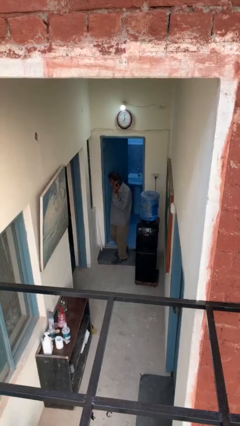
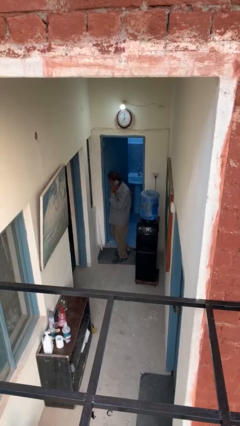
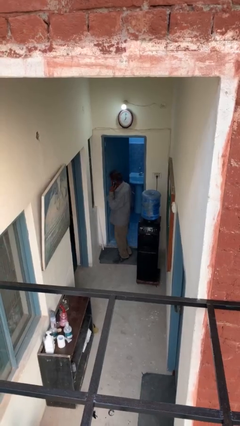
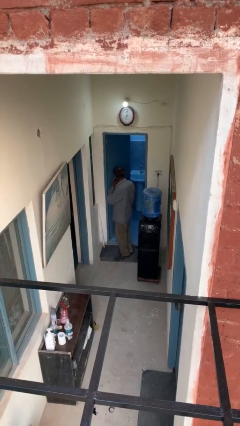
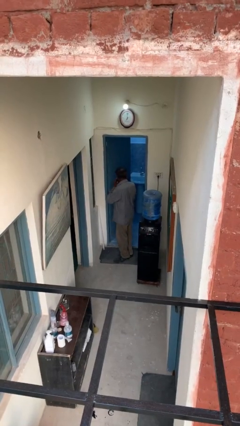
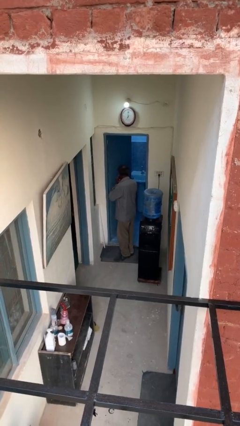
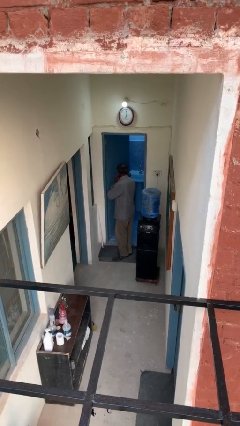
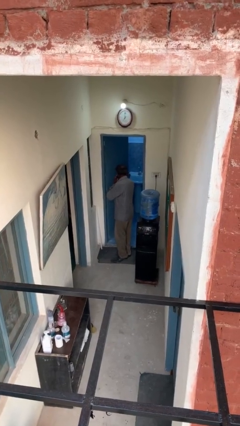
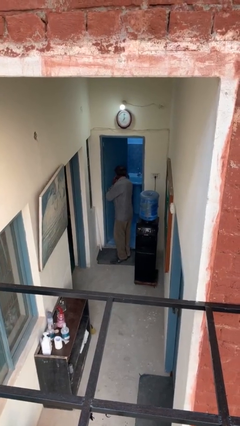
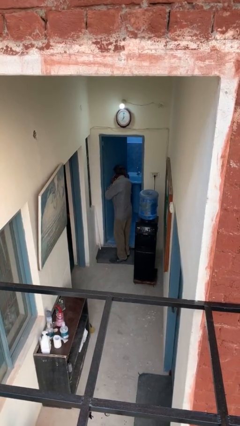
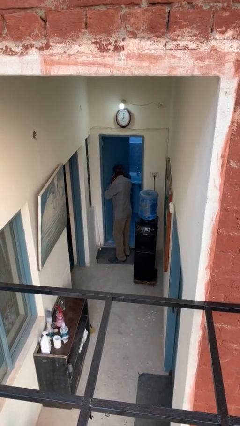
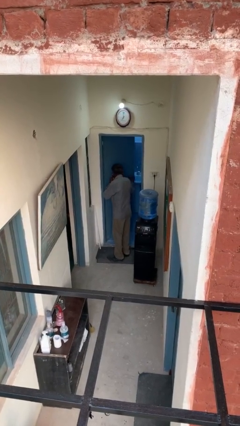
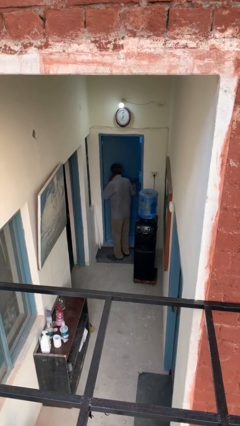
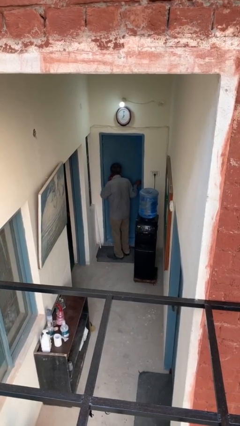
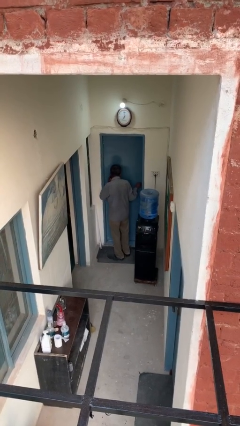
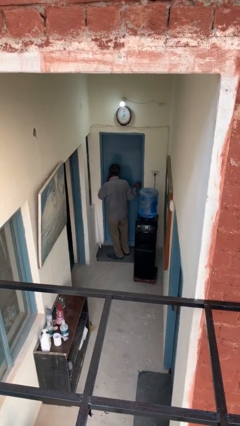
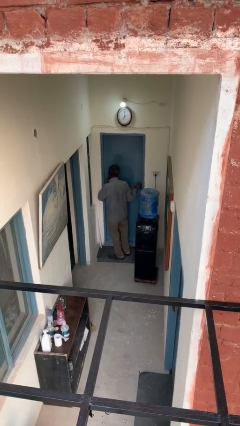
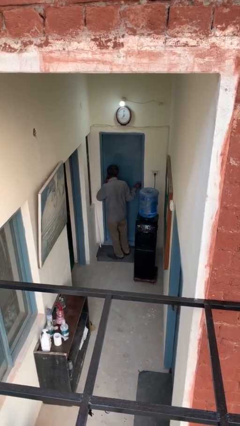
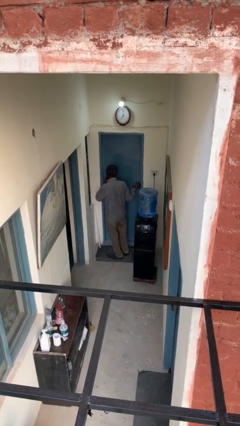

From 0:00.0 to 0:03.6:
person closes facility door

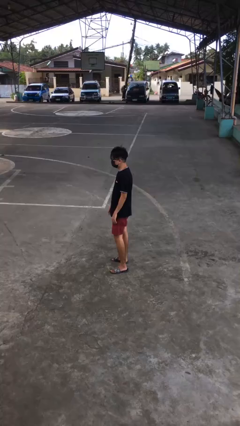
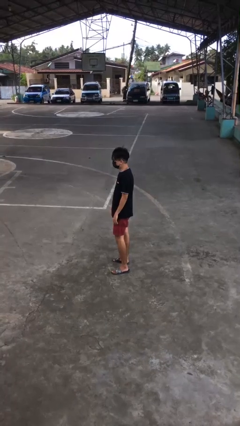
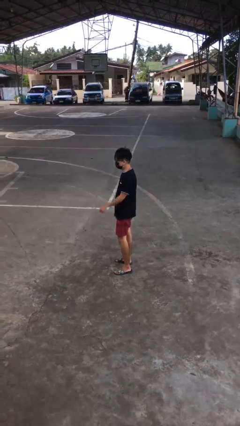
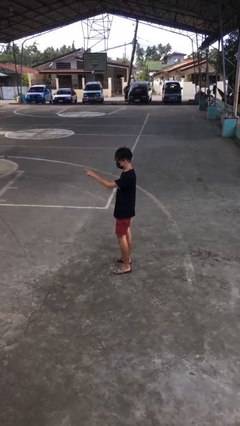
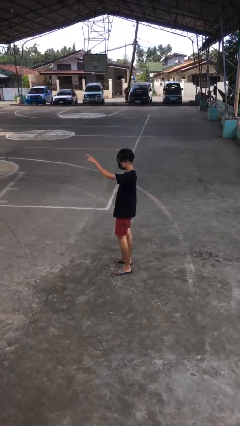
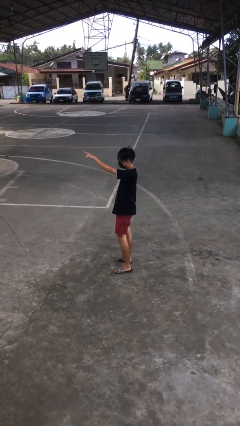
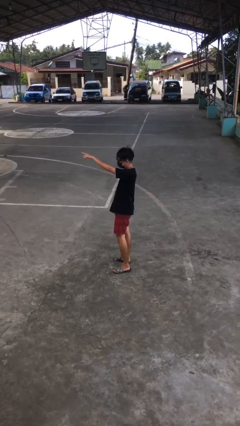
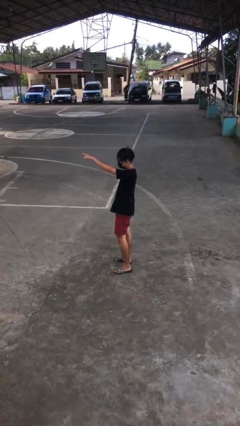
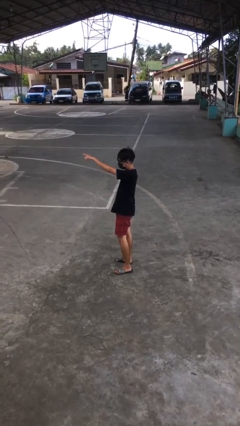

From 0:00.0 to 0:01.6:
person points at person

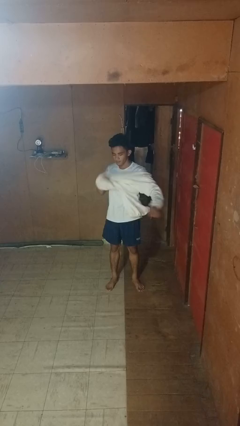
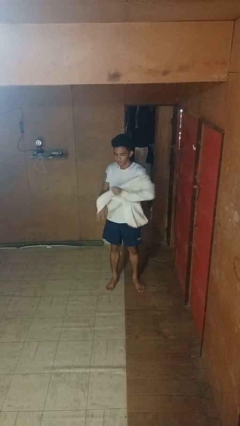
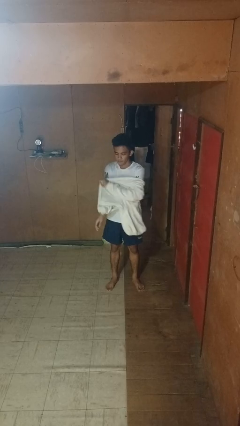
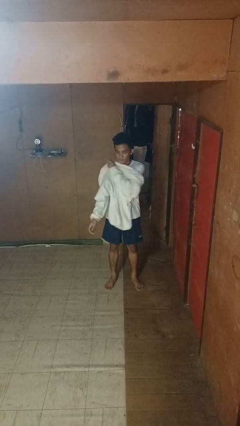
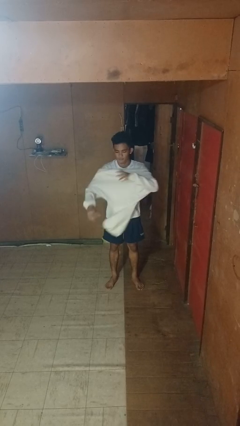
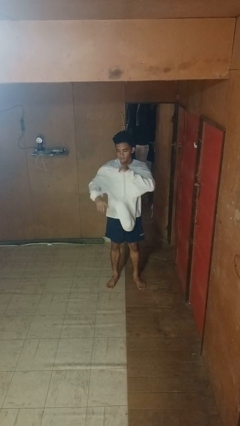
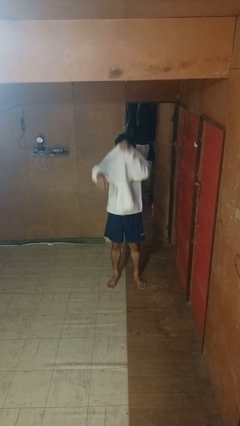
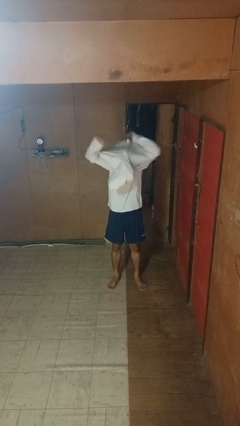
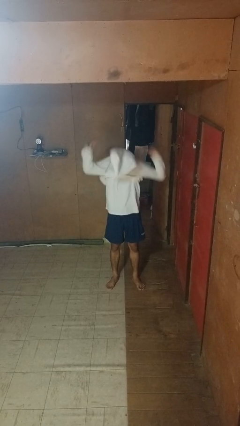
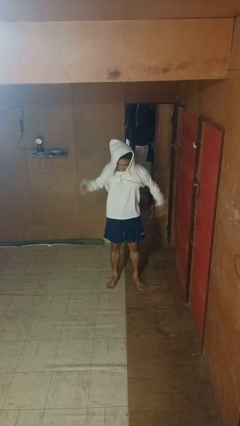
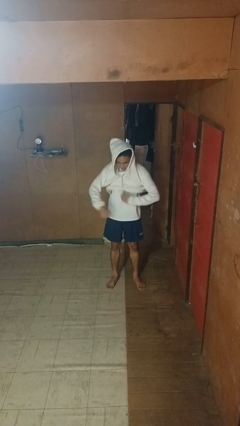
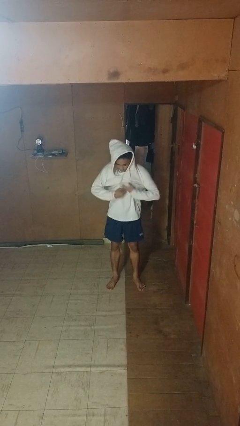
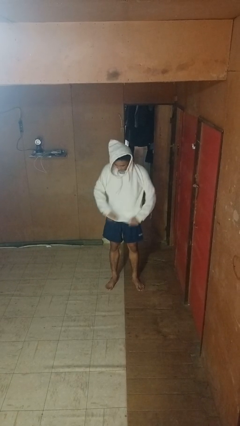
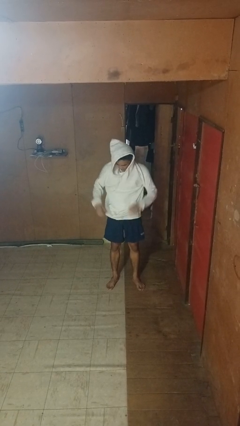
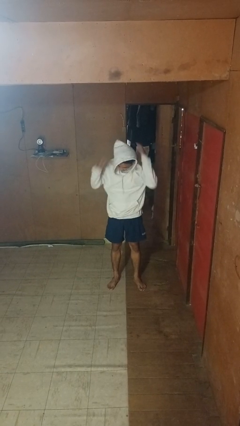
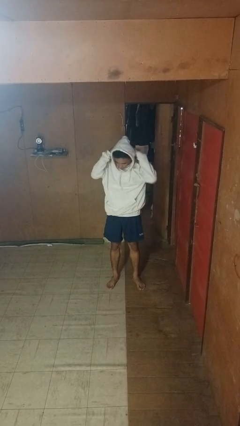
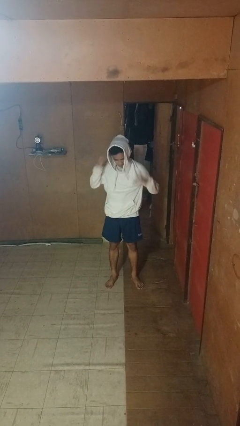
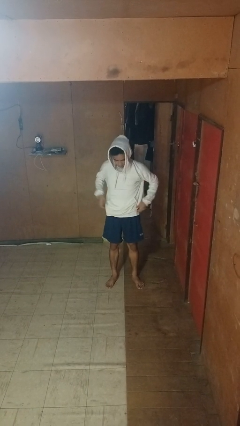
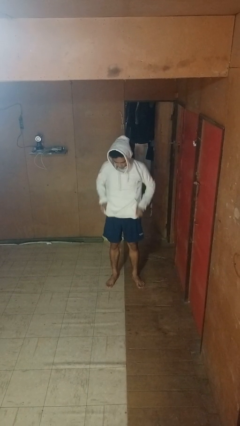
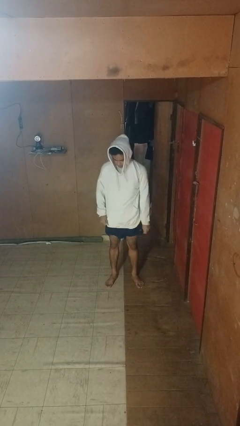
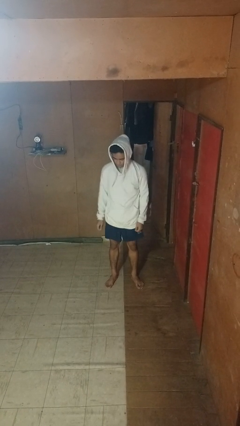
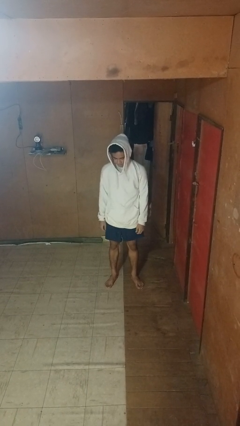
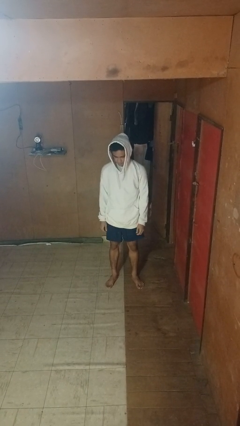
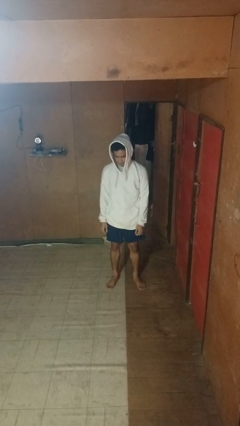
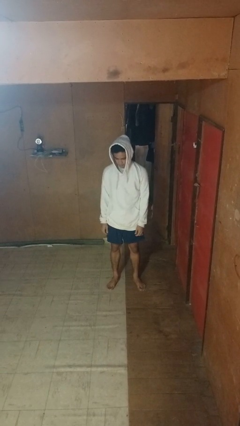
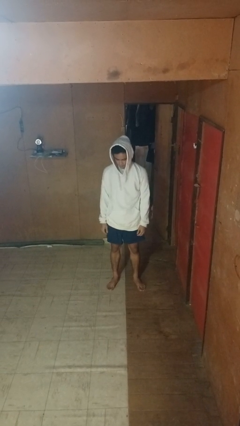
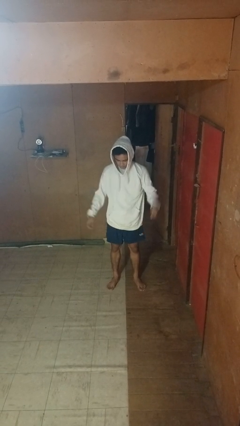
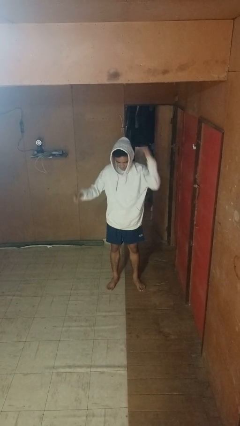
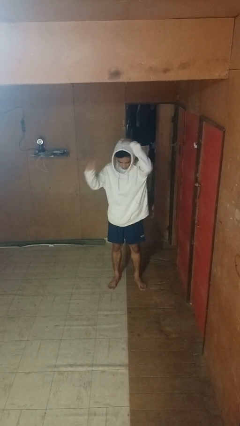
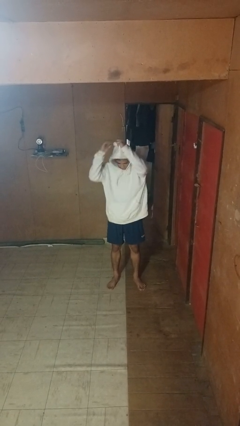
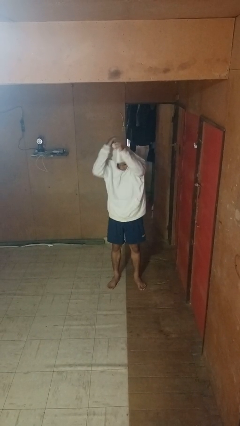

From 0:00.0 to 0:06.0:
person puts on hoodie

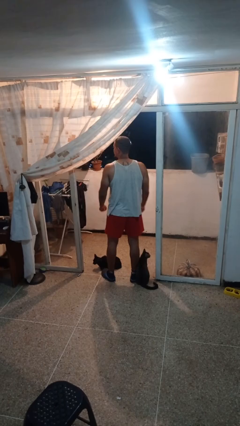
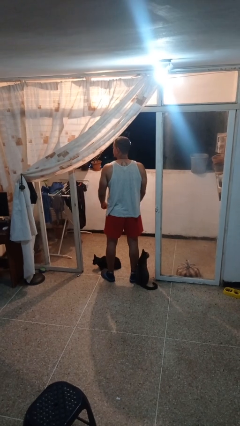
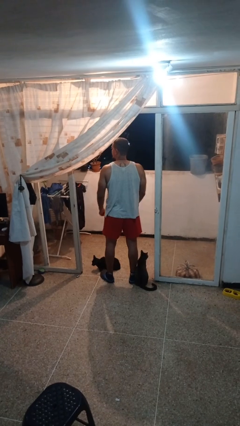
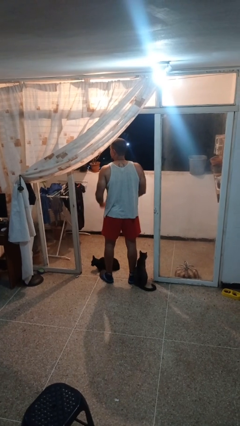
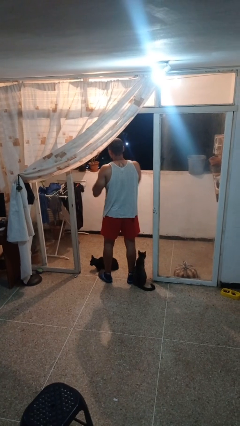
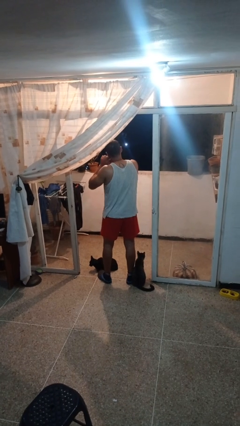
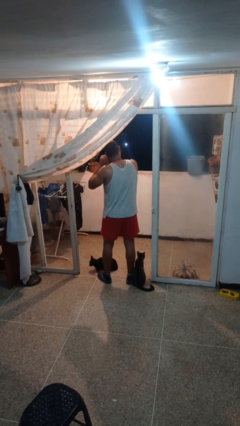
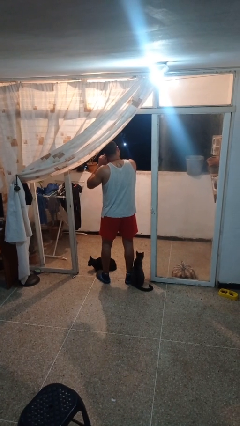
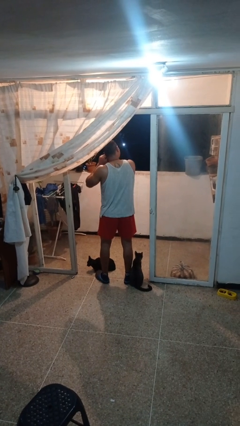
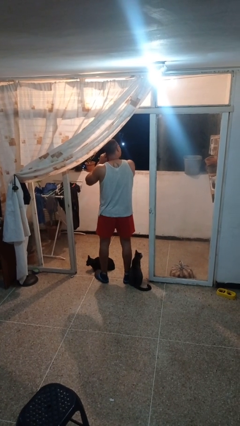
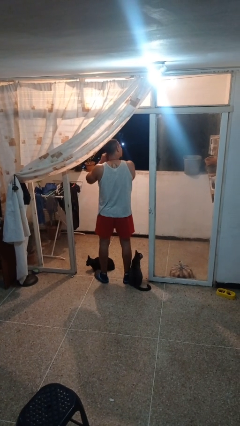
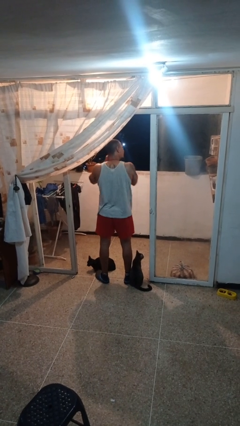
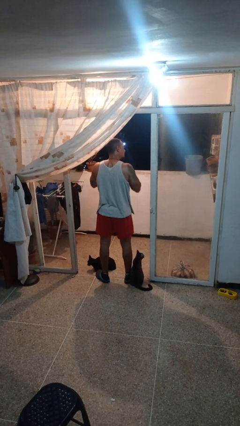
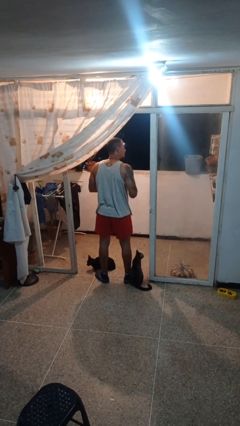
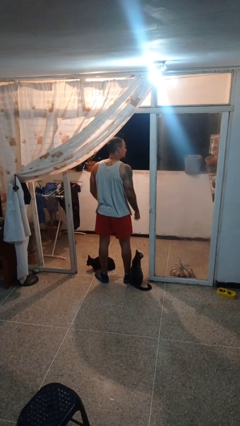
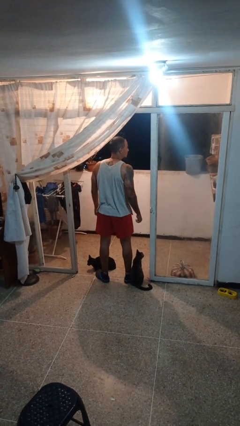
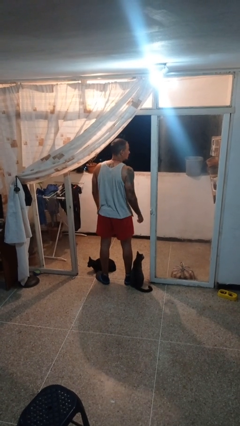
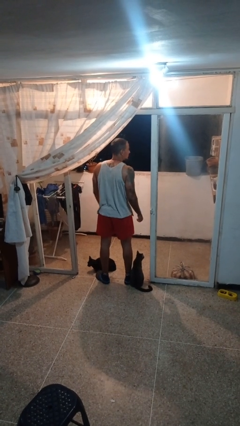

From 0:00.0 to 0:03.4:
person takes off earrings

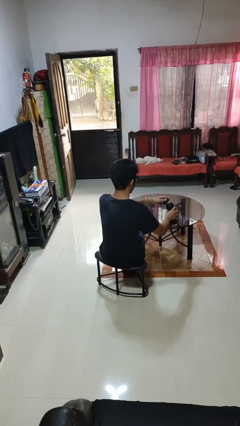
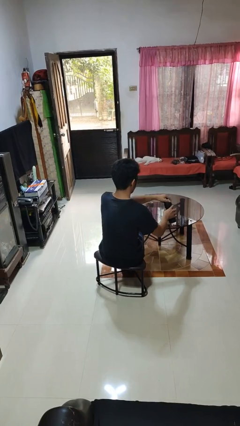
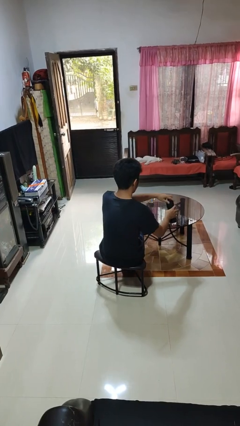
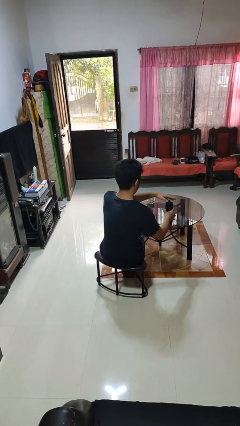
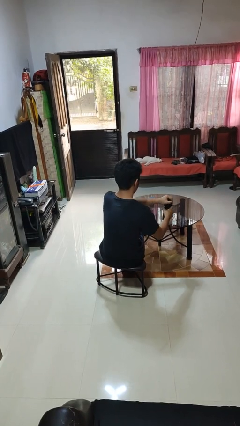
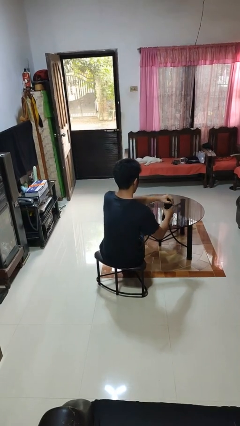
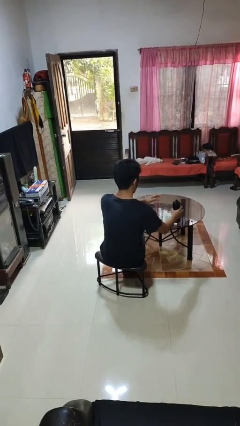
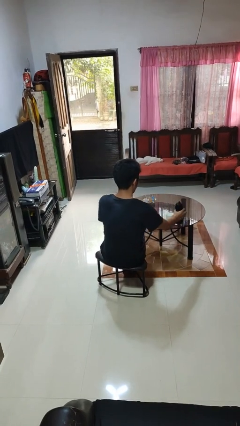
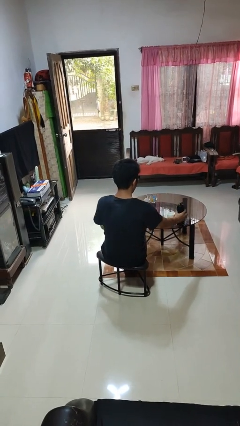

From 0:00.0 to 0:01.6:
person screws lid to bottle

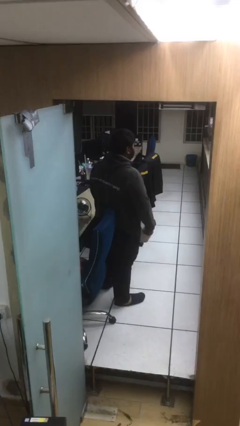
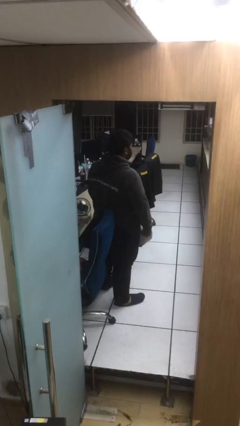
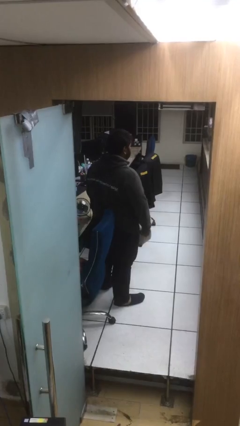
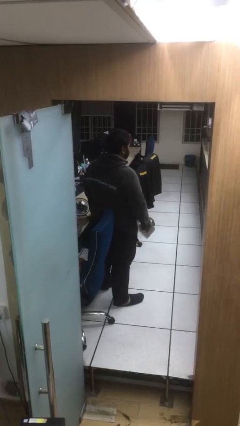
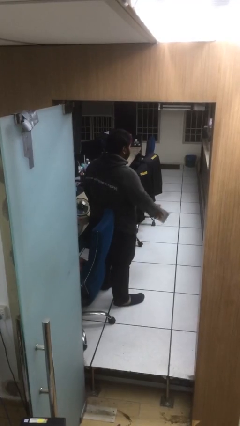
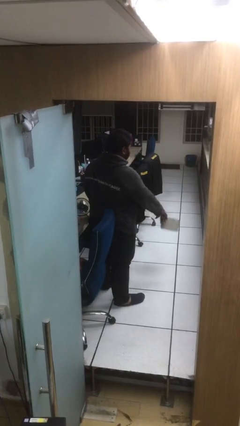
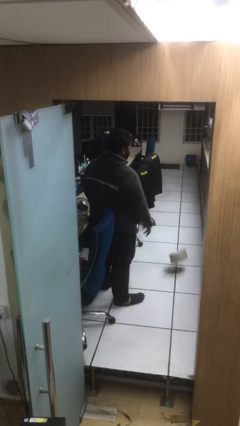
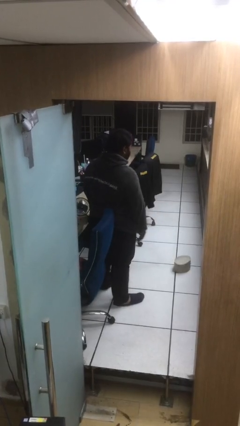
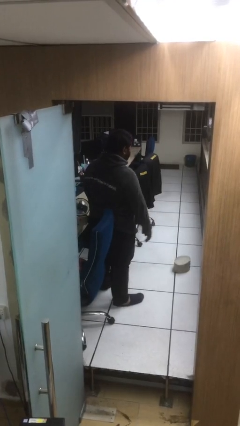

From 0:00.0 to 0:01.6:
person throws object to ground
